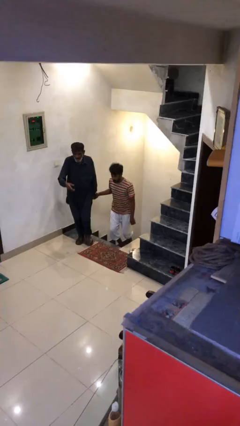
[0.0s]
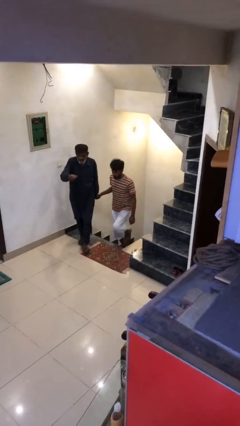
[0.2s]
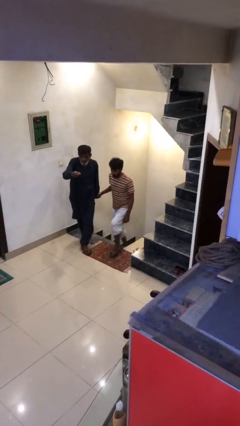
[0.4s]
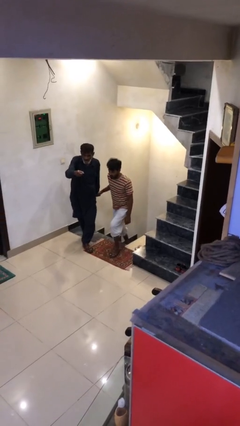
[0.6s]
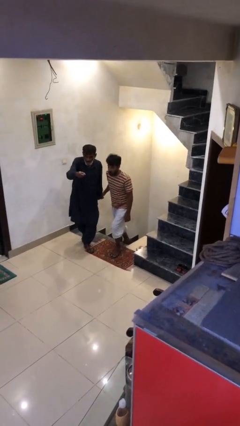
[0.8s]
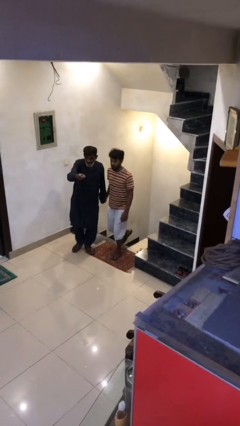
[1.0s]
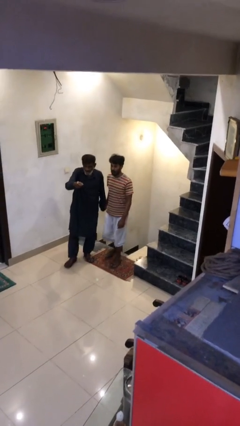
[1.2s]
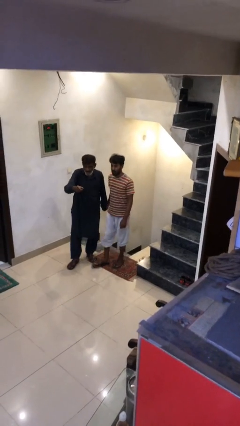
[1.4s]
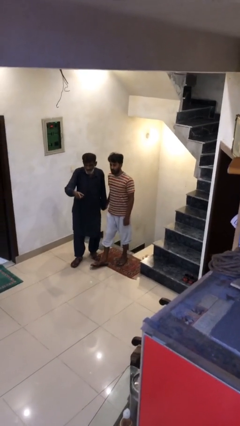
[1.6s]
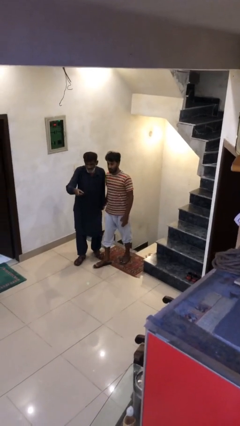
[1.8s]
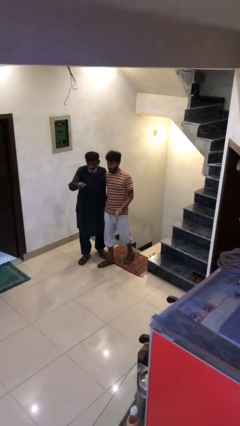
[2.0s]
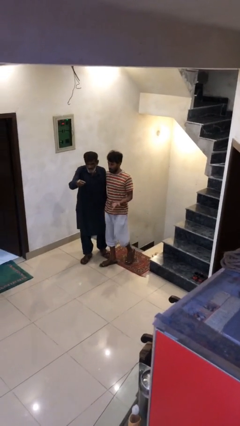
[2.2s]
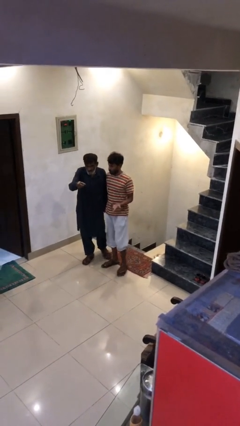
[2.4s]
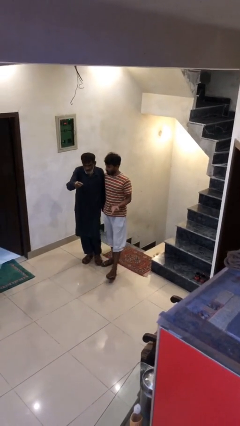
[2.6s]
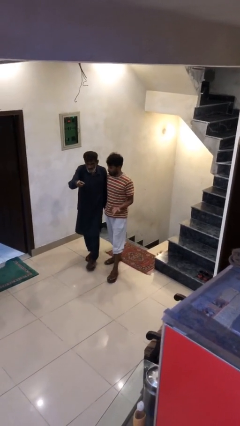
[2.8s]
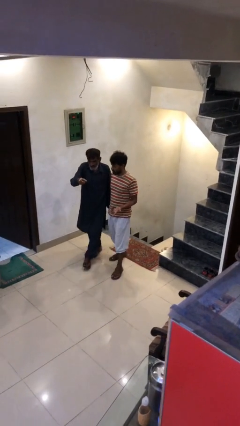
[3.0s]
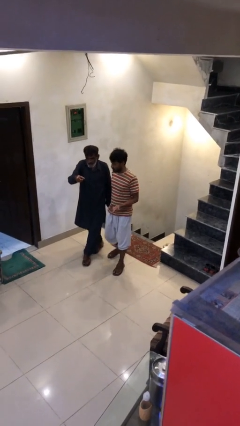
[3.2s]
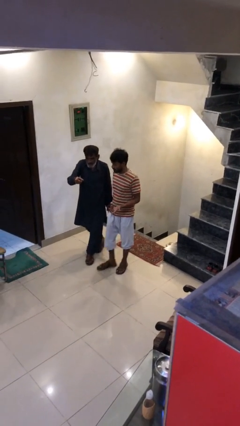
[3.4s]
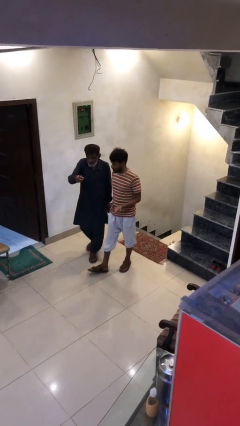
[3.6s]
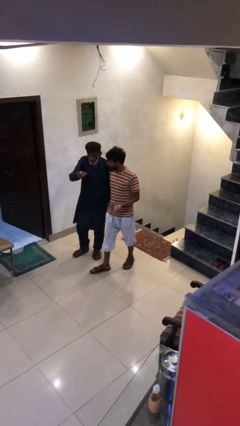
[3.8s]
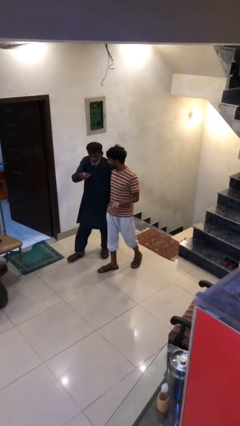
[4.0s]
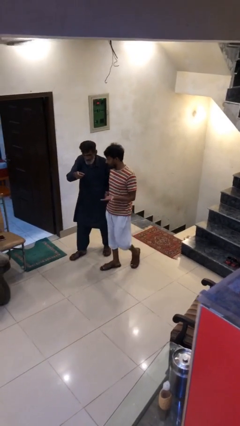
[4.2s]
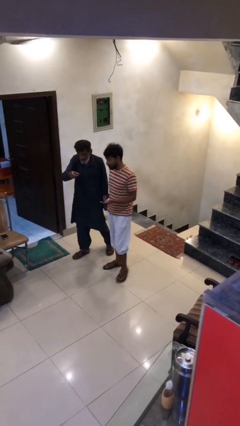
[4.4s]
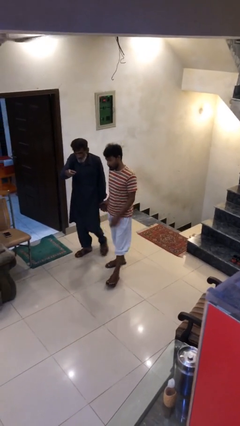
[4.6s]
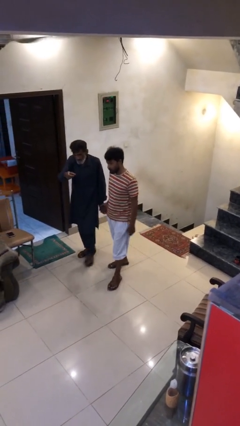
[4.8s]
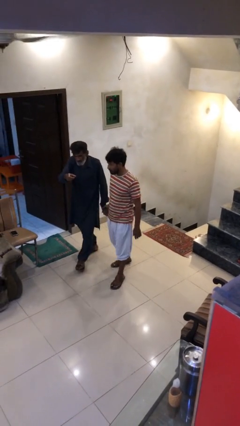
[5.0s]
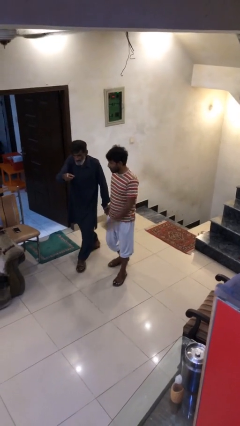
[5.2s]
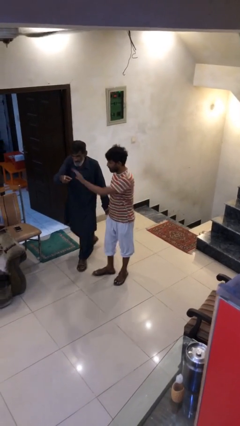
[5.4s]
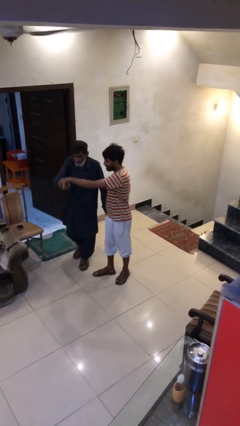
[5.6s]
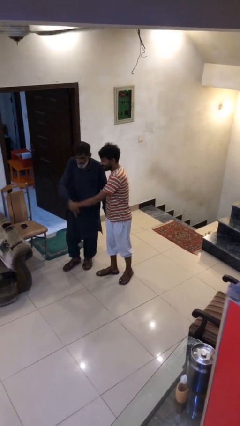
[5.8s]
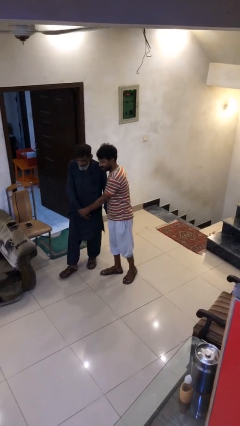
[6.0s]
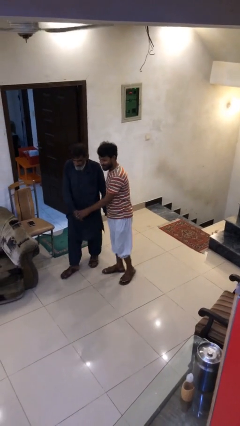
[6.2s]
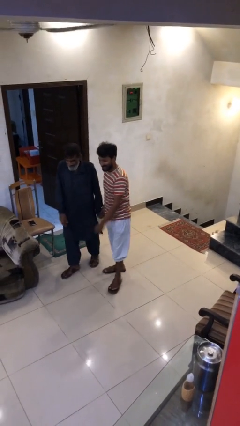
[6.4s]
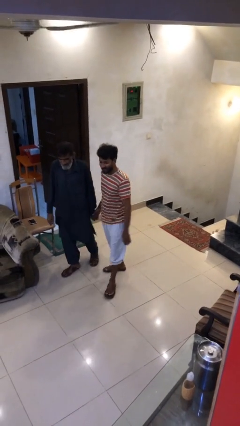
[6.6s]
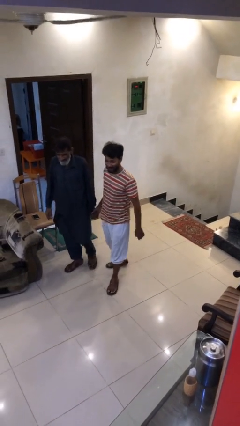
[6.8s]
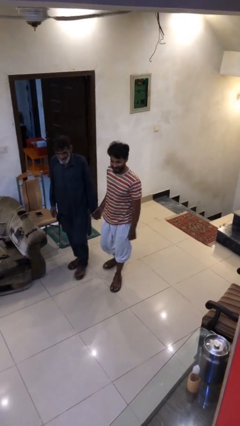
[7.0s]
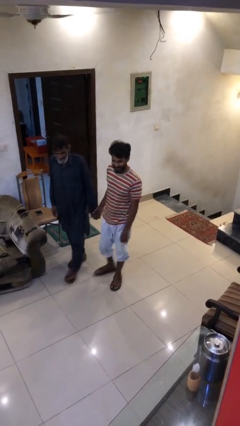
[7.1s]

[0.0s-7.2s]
person holds hand

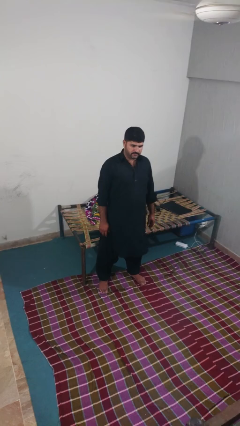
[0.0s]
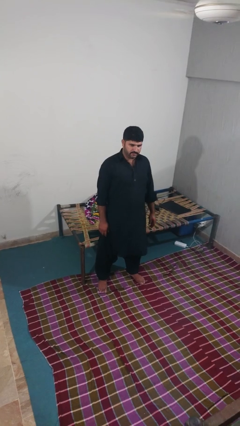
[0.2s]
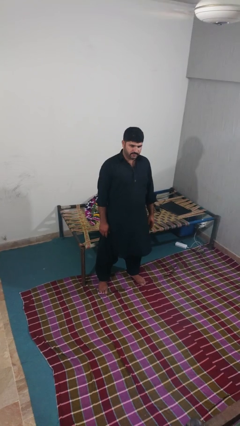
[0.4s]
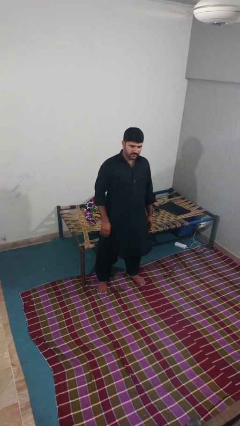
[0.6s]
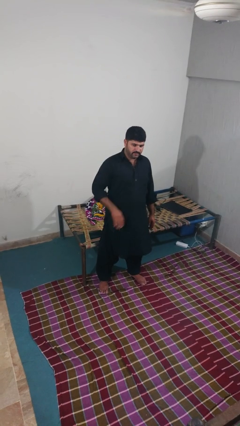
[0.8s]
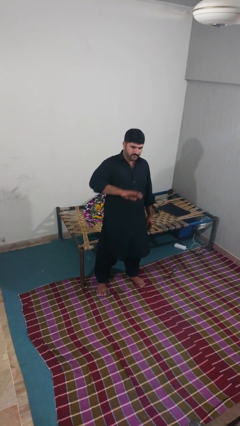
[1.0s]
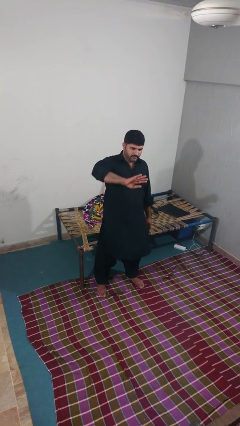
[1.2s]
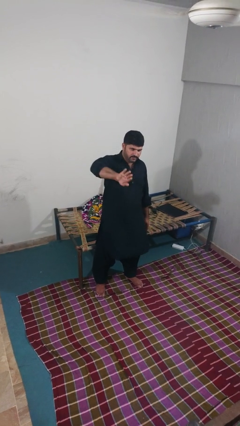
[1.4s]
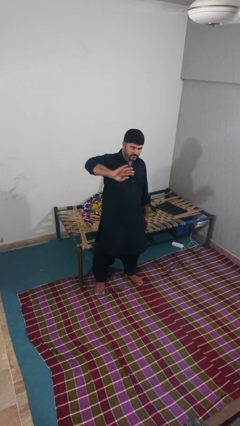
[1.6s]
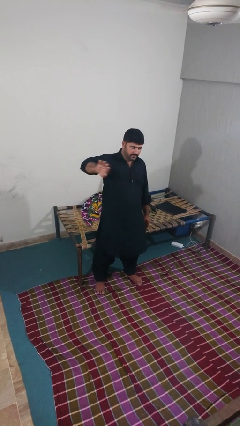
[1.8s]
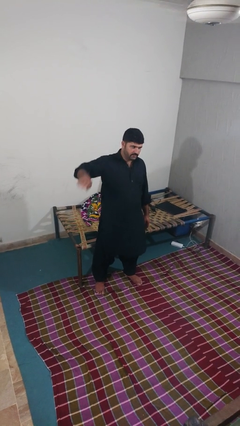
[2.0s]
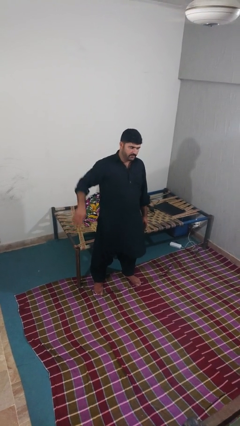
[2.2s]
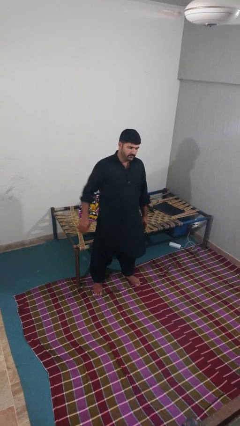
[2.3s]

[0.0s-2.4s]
person gestures swipe right

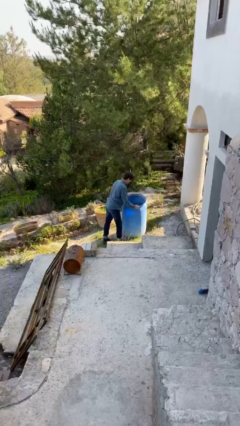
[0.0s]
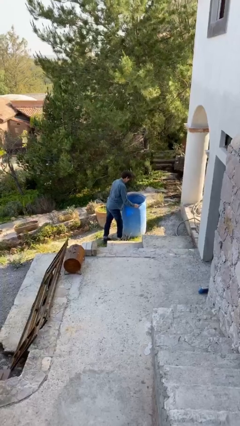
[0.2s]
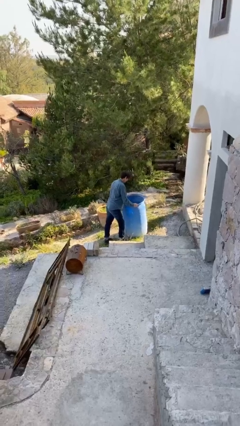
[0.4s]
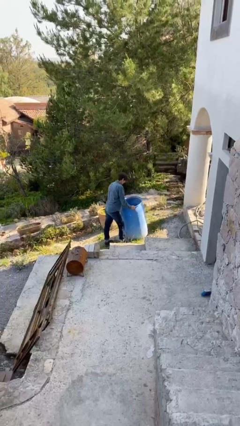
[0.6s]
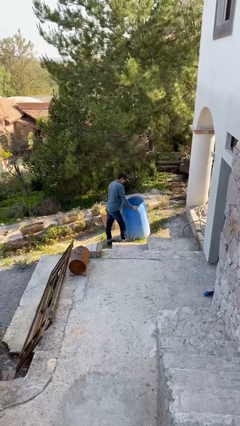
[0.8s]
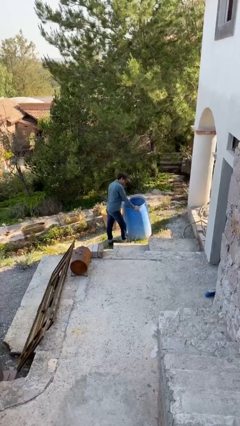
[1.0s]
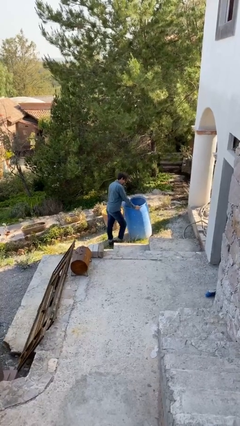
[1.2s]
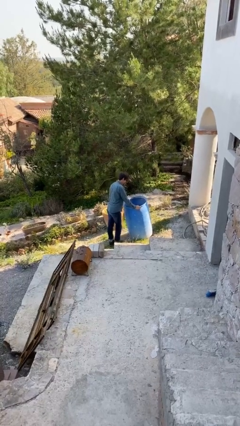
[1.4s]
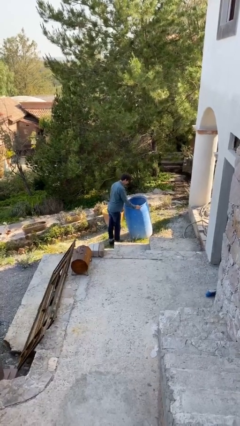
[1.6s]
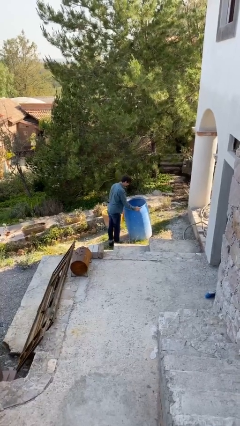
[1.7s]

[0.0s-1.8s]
person puts down object on floor

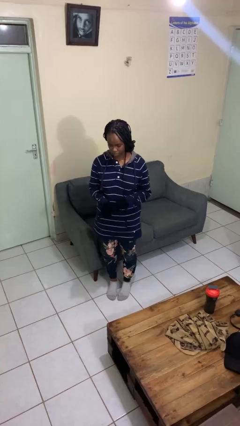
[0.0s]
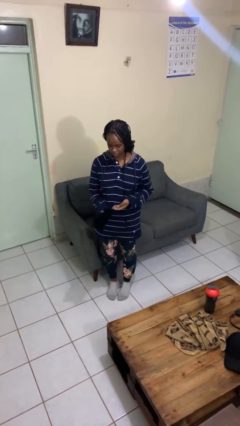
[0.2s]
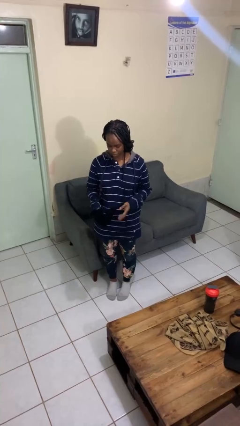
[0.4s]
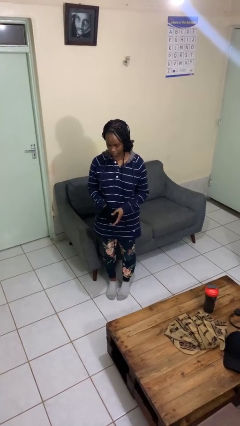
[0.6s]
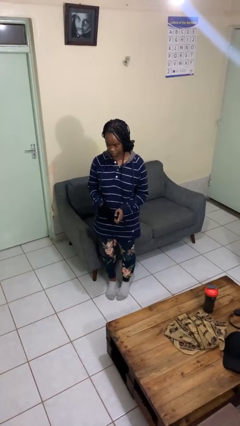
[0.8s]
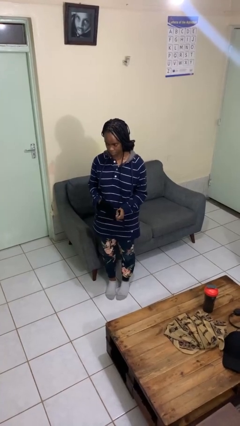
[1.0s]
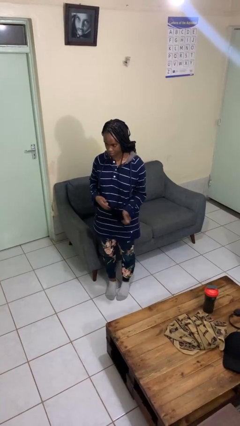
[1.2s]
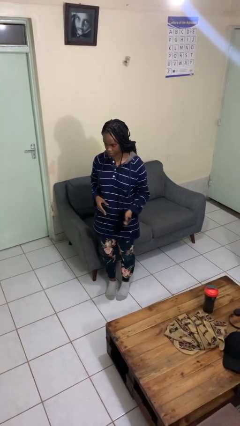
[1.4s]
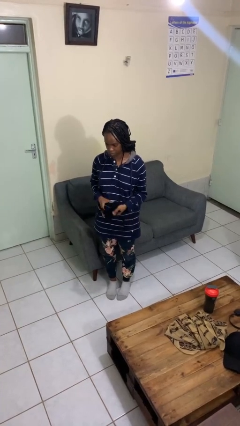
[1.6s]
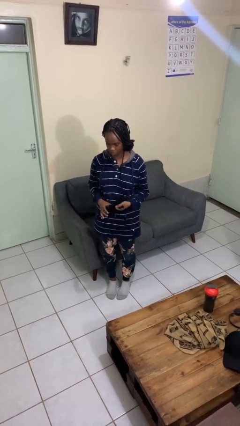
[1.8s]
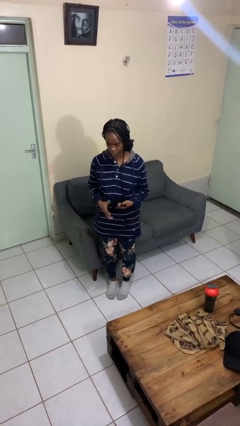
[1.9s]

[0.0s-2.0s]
person takes off gloves

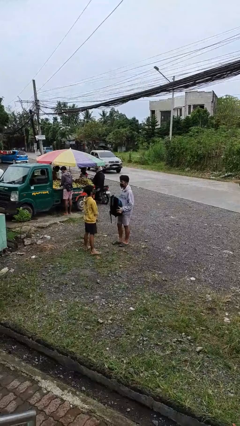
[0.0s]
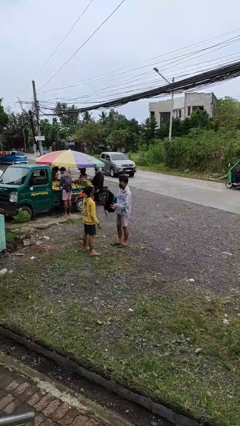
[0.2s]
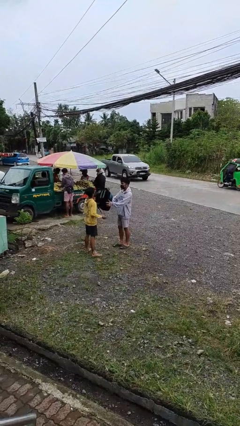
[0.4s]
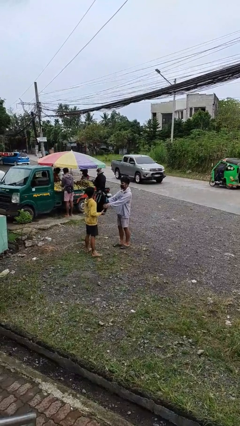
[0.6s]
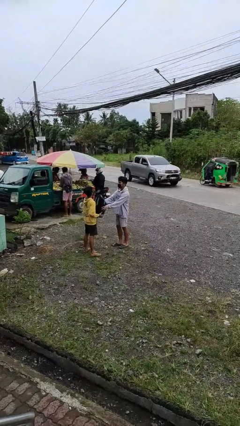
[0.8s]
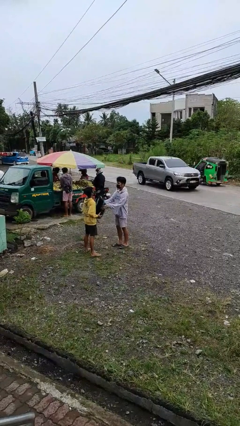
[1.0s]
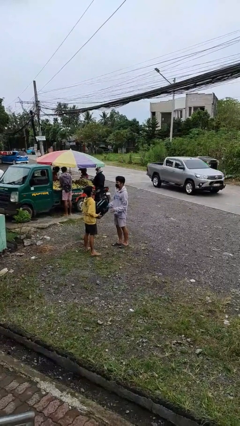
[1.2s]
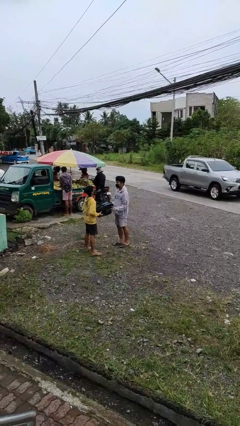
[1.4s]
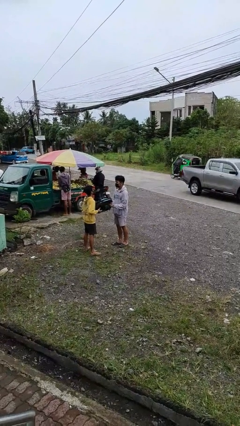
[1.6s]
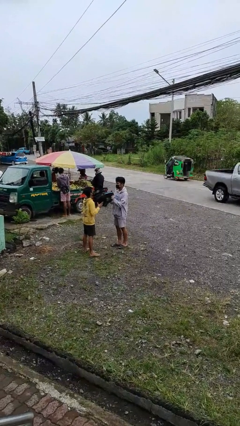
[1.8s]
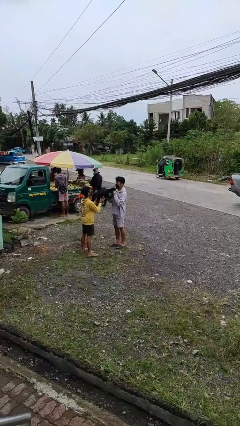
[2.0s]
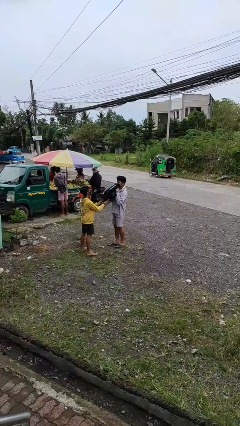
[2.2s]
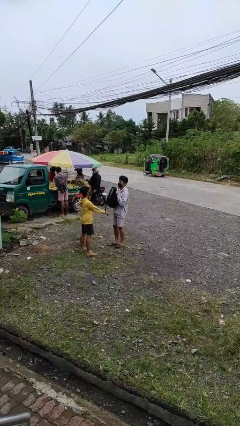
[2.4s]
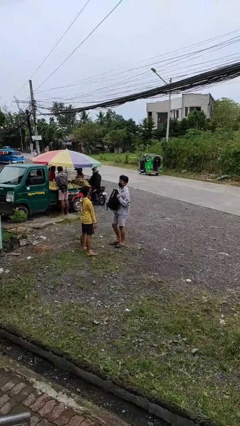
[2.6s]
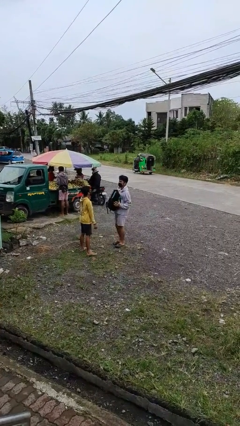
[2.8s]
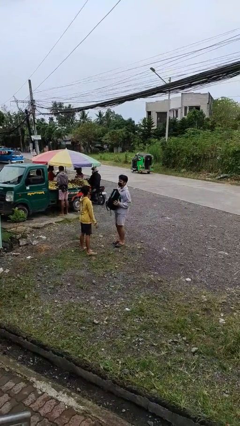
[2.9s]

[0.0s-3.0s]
person transfers object to person

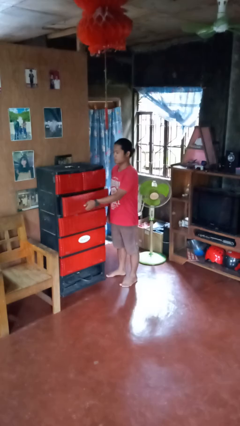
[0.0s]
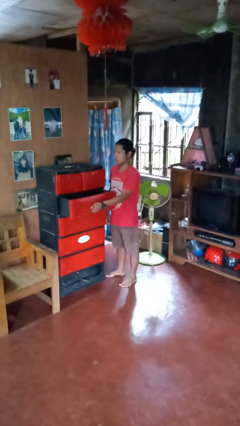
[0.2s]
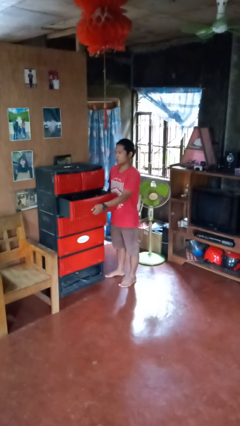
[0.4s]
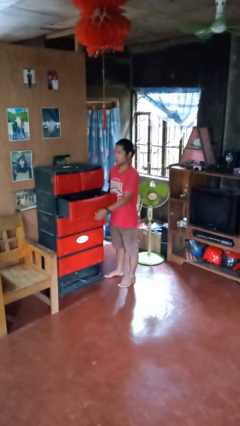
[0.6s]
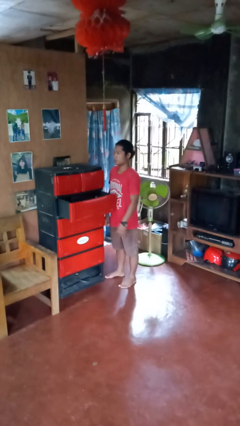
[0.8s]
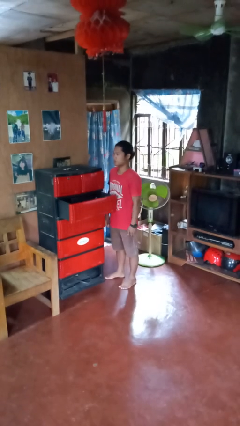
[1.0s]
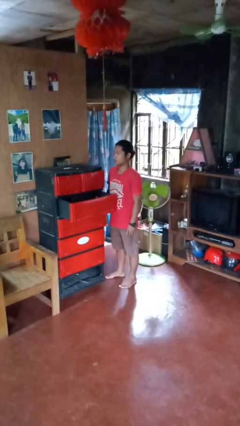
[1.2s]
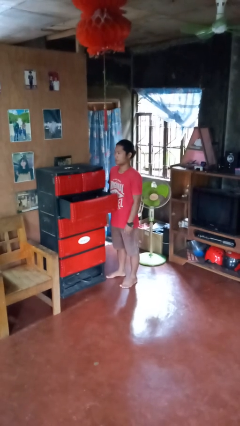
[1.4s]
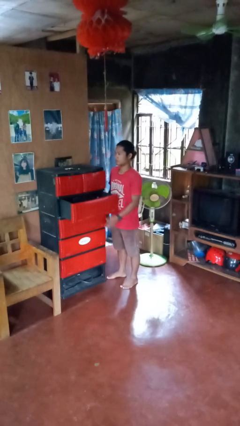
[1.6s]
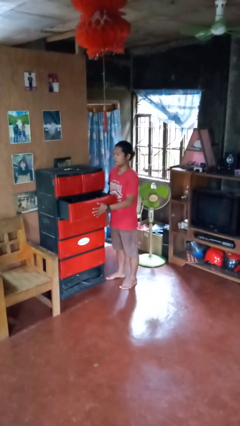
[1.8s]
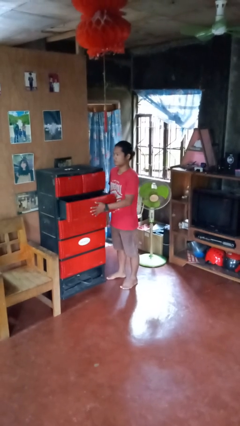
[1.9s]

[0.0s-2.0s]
person opens dresser drawer
